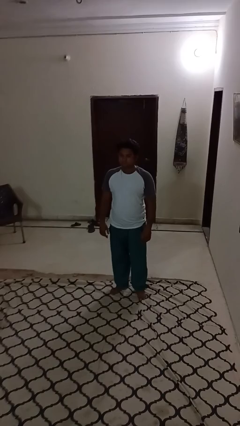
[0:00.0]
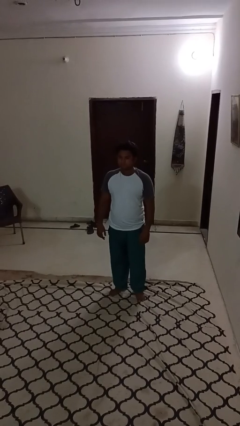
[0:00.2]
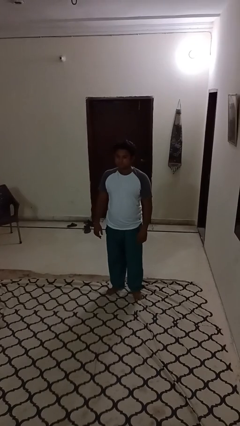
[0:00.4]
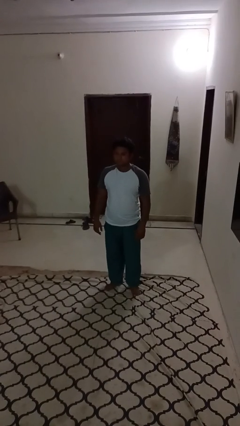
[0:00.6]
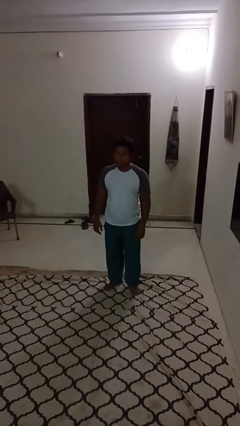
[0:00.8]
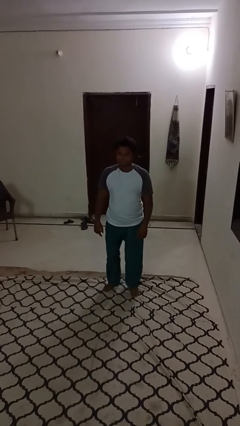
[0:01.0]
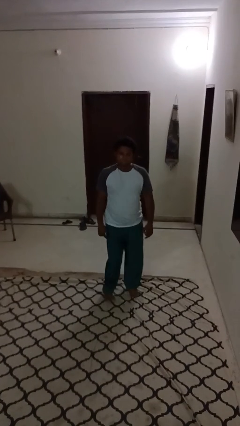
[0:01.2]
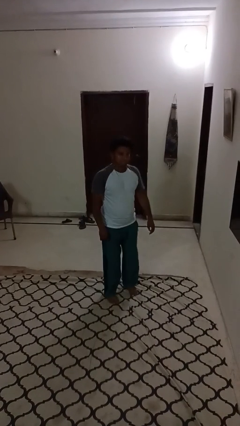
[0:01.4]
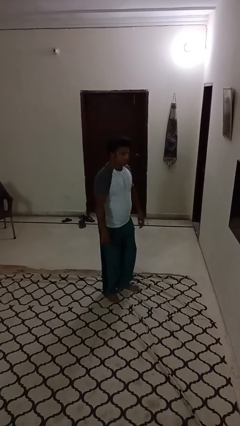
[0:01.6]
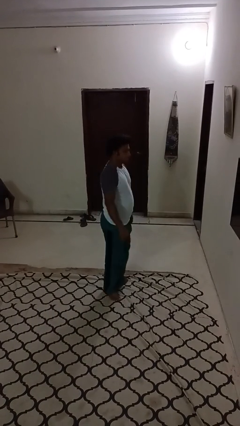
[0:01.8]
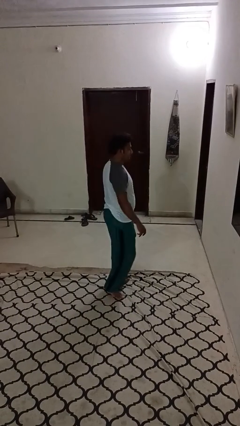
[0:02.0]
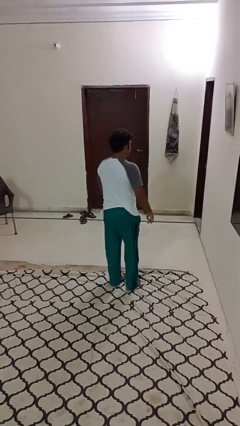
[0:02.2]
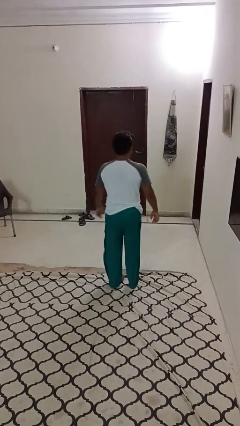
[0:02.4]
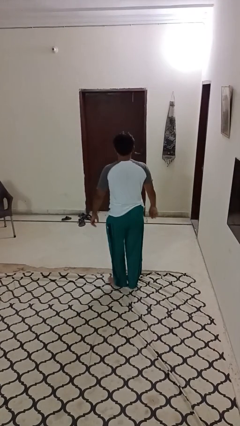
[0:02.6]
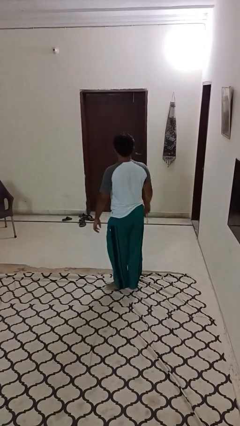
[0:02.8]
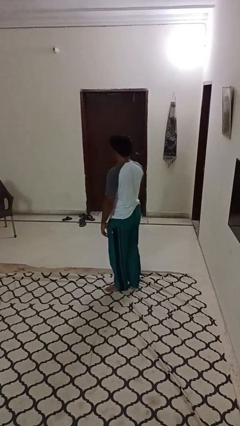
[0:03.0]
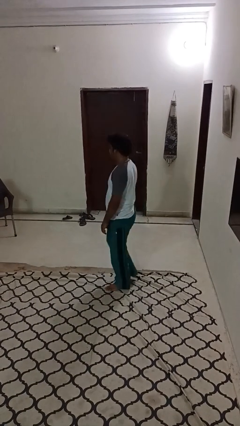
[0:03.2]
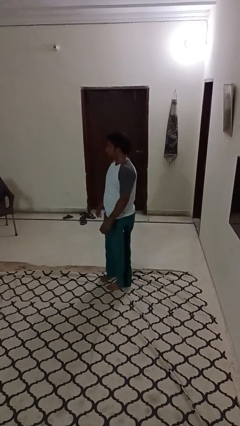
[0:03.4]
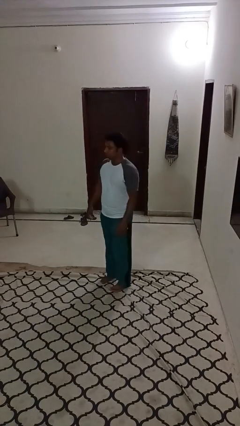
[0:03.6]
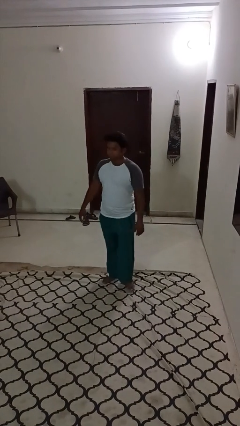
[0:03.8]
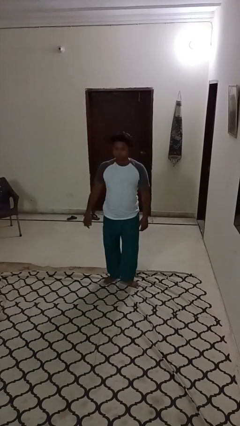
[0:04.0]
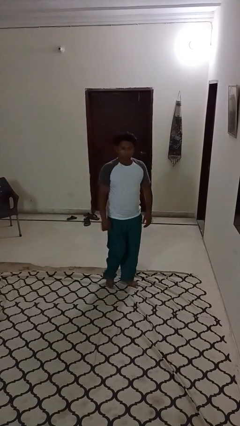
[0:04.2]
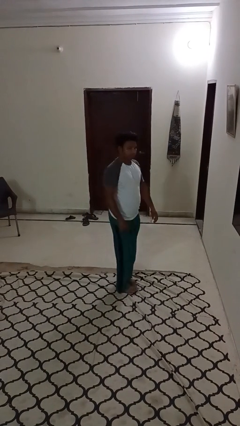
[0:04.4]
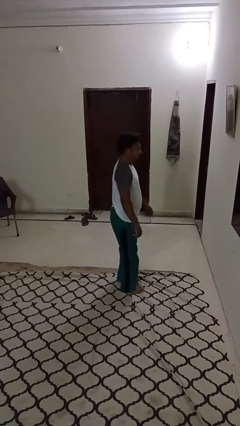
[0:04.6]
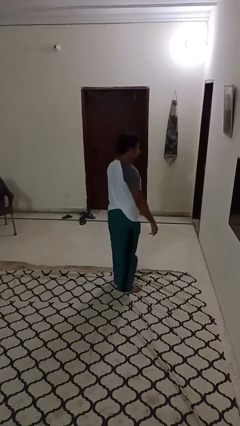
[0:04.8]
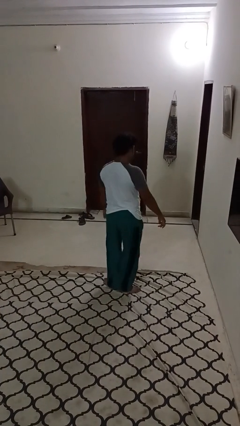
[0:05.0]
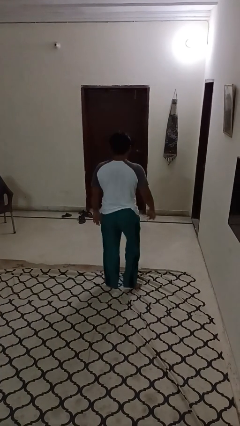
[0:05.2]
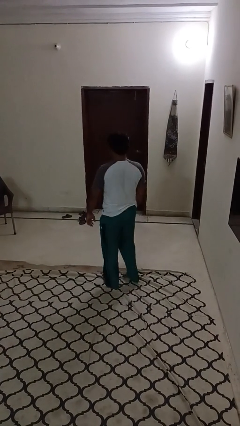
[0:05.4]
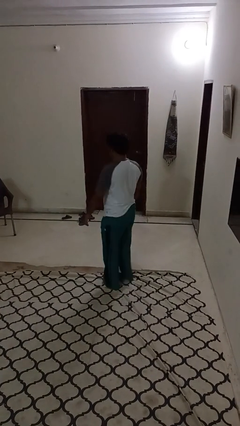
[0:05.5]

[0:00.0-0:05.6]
person twirls

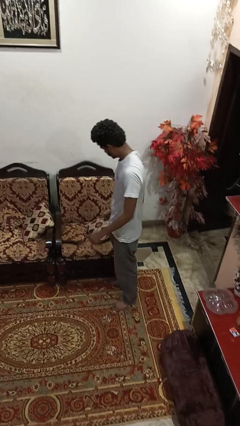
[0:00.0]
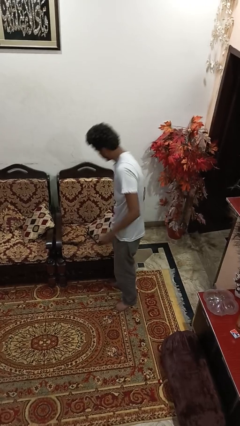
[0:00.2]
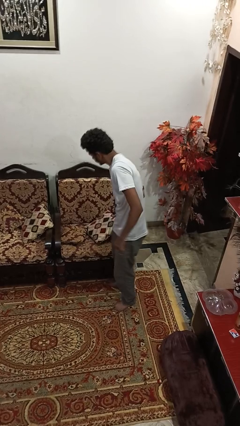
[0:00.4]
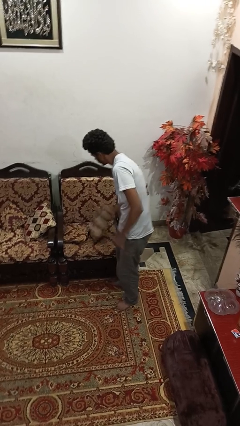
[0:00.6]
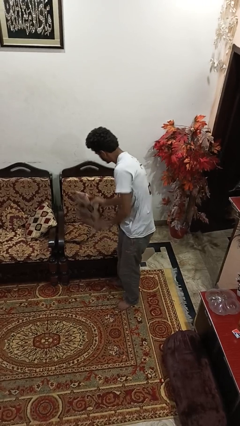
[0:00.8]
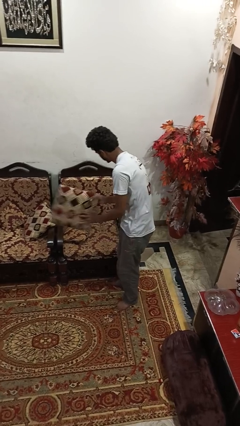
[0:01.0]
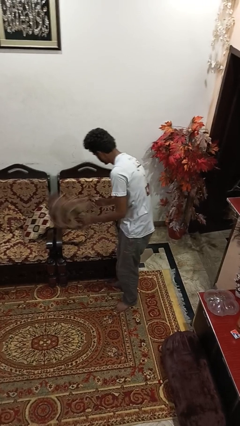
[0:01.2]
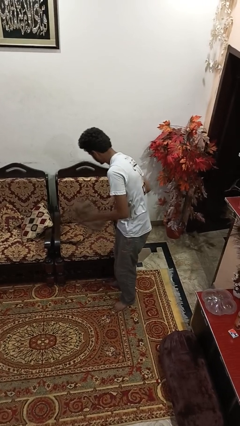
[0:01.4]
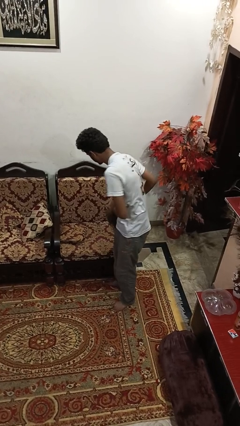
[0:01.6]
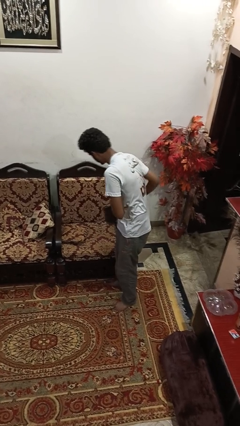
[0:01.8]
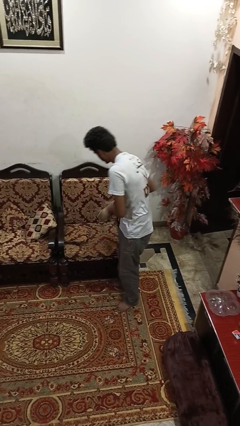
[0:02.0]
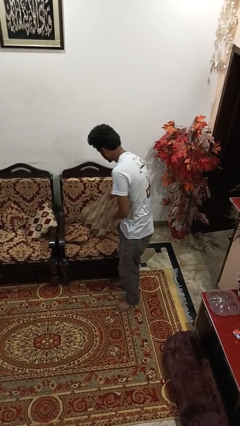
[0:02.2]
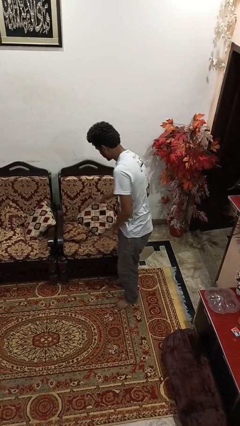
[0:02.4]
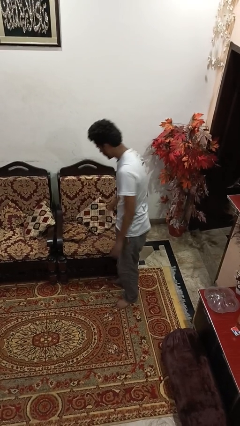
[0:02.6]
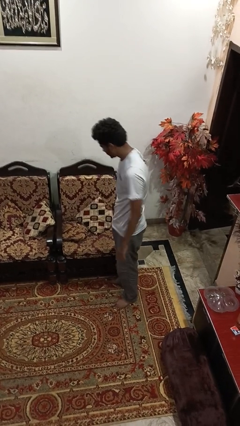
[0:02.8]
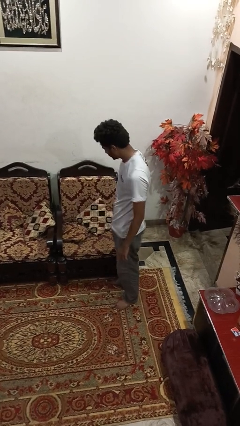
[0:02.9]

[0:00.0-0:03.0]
person searches in couch

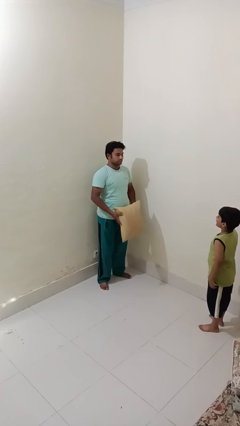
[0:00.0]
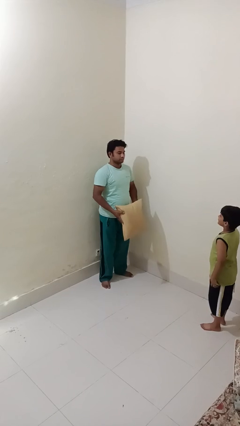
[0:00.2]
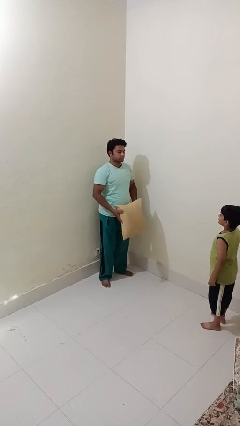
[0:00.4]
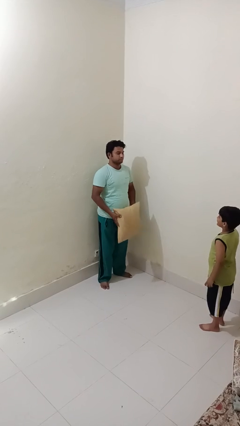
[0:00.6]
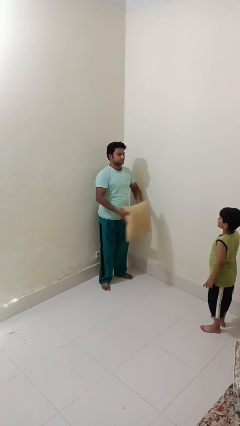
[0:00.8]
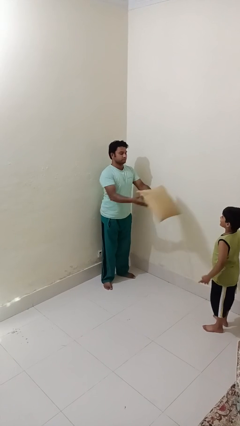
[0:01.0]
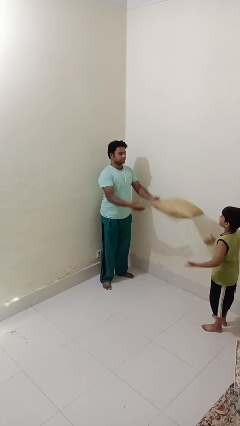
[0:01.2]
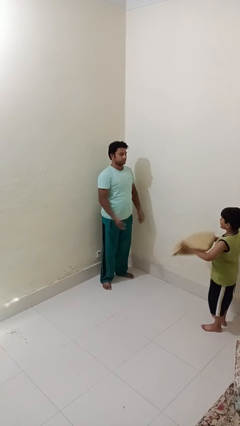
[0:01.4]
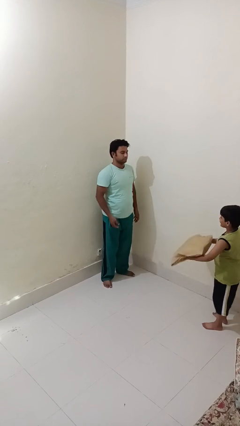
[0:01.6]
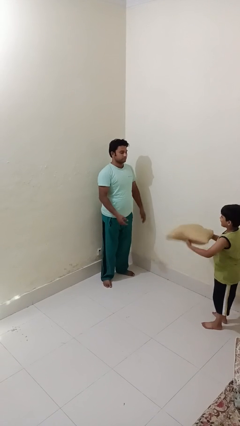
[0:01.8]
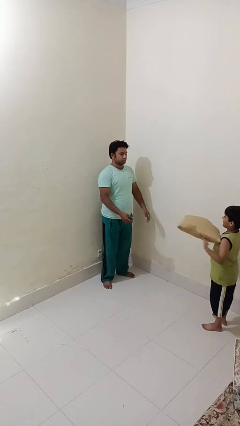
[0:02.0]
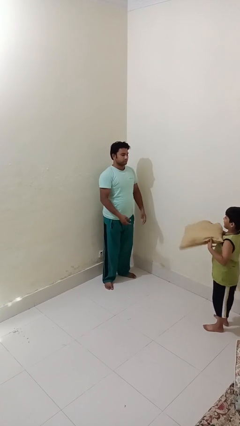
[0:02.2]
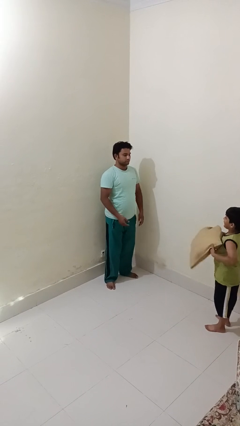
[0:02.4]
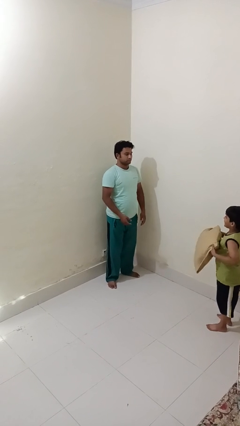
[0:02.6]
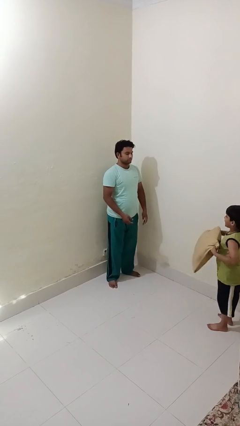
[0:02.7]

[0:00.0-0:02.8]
person throws object to person

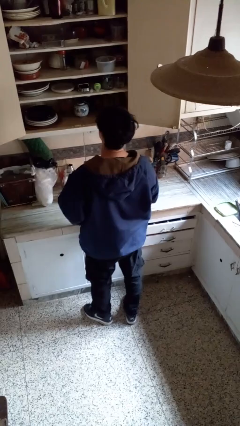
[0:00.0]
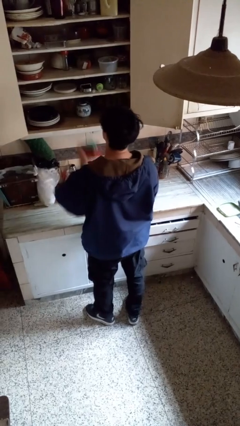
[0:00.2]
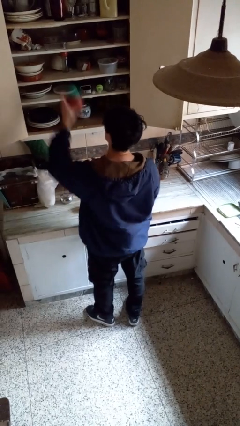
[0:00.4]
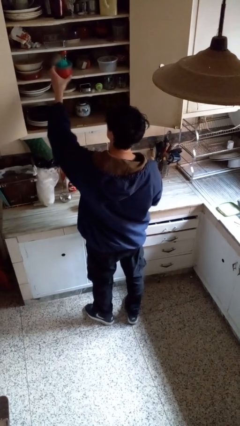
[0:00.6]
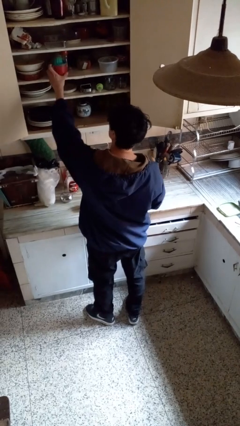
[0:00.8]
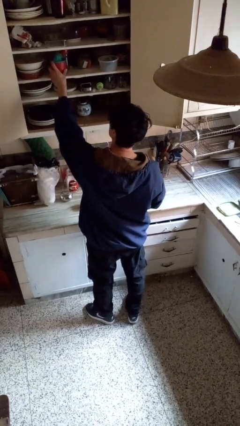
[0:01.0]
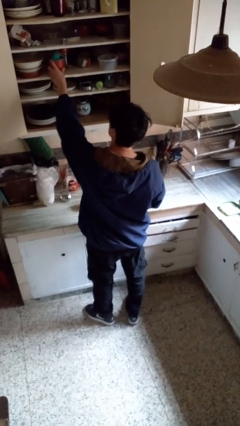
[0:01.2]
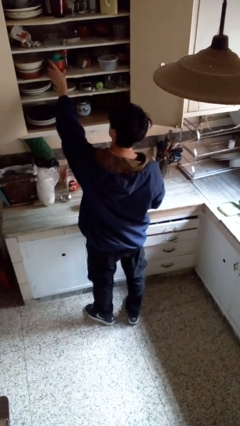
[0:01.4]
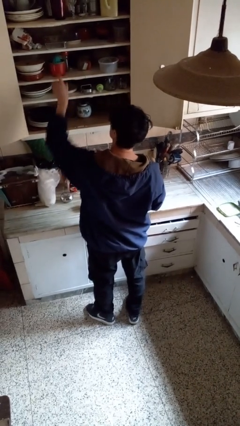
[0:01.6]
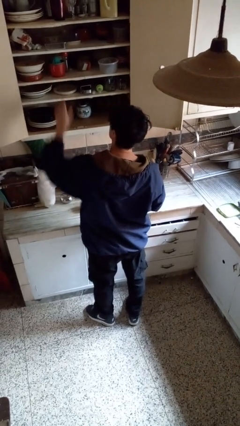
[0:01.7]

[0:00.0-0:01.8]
person puts object in cabinet

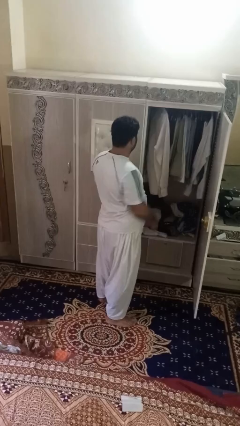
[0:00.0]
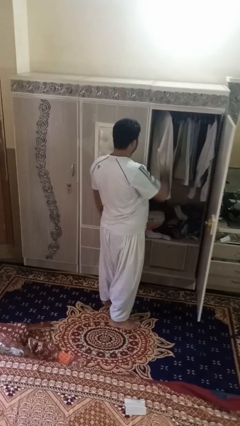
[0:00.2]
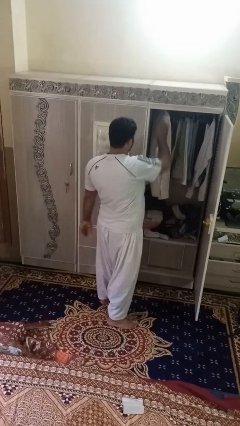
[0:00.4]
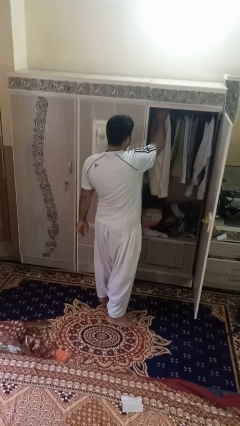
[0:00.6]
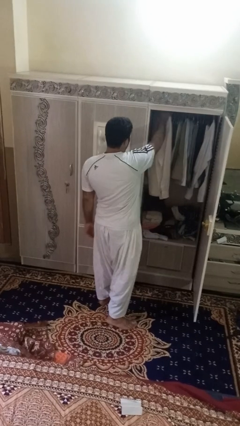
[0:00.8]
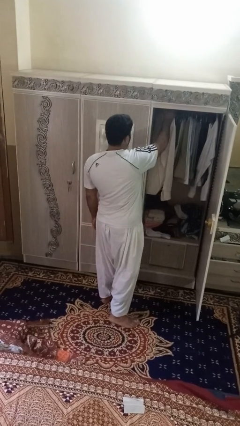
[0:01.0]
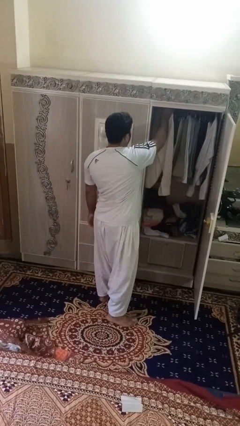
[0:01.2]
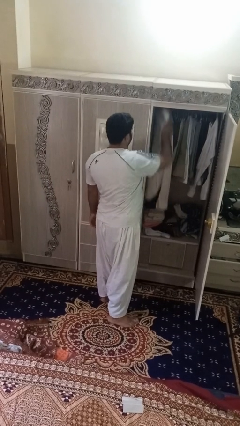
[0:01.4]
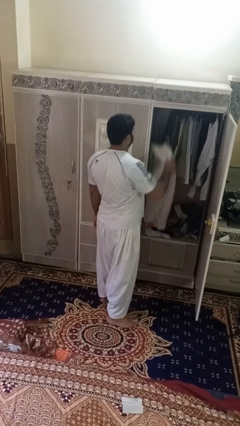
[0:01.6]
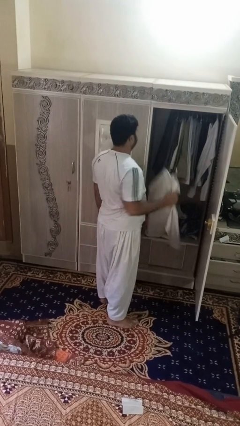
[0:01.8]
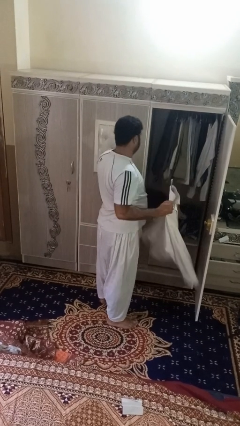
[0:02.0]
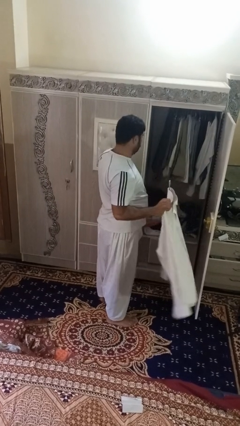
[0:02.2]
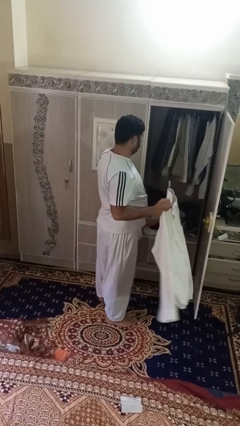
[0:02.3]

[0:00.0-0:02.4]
person takes clothes from closet

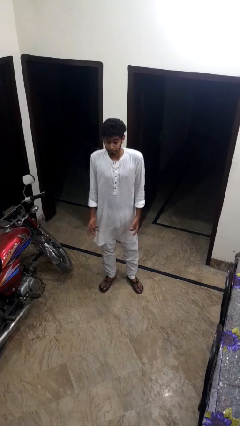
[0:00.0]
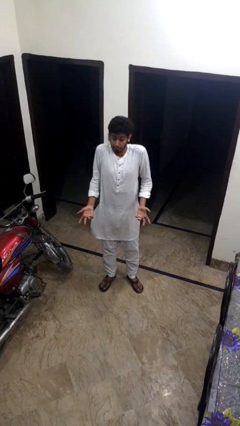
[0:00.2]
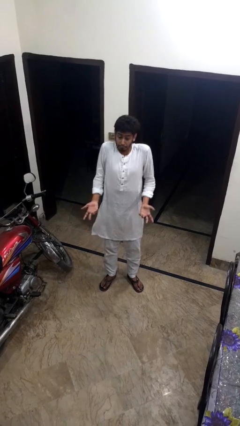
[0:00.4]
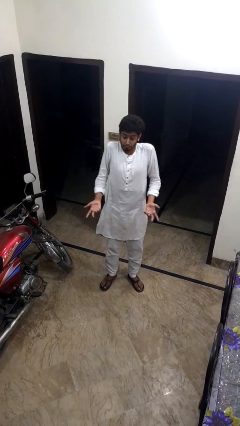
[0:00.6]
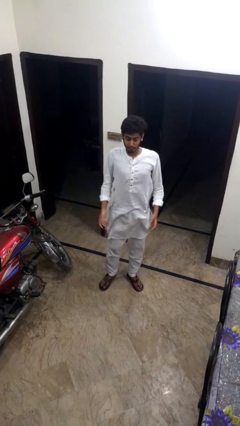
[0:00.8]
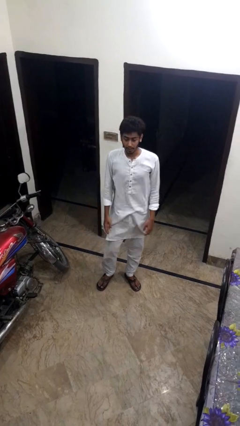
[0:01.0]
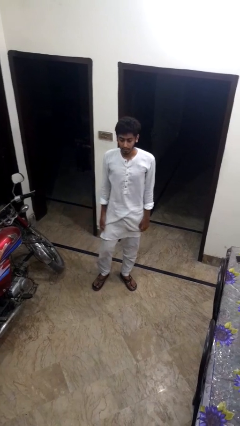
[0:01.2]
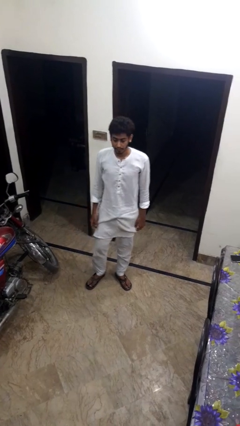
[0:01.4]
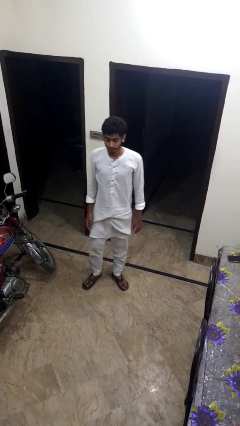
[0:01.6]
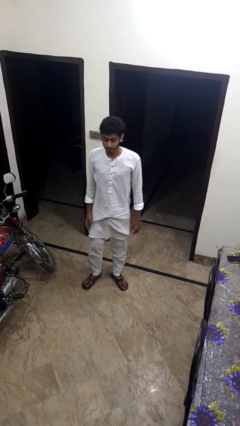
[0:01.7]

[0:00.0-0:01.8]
person shrugs
